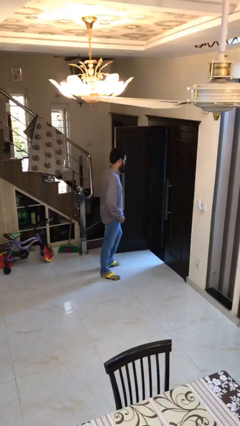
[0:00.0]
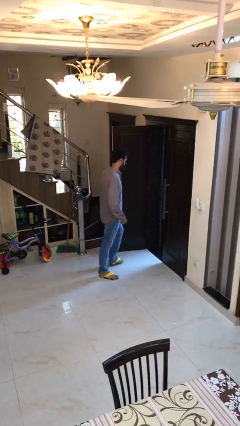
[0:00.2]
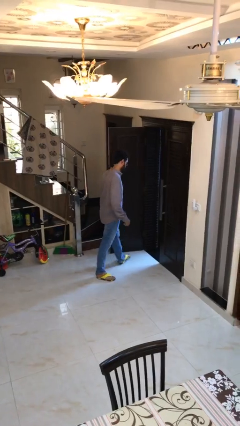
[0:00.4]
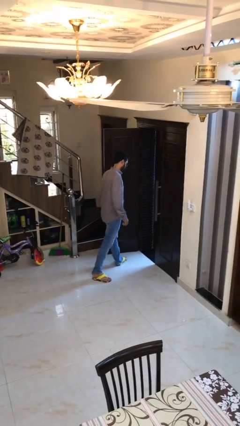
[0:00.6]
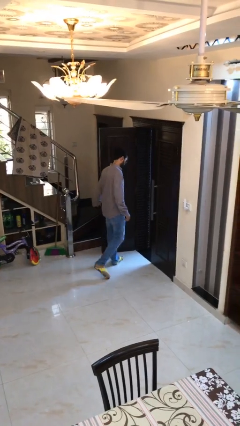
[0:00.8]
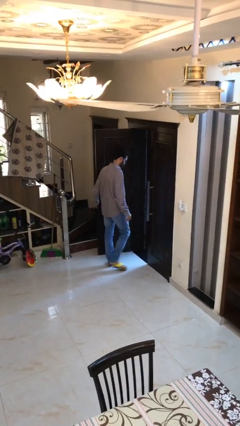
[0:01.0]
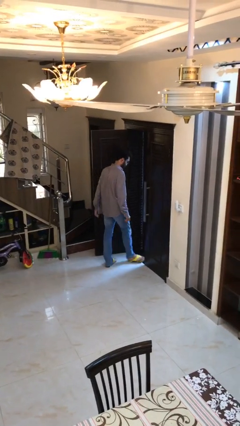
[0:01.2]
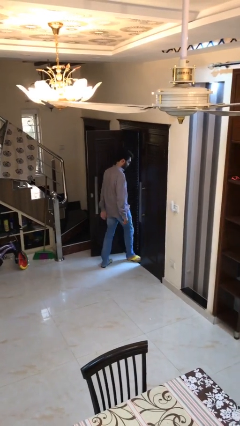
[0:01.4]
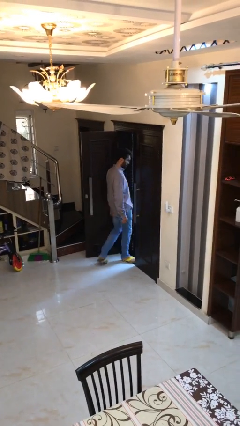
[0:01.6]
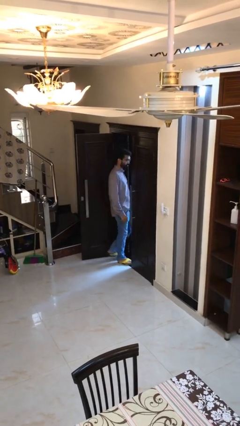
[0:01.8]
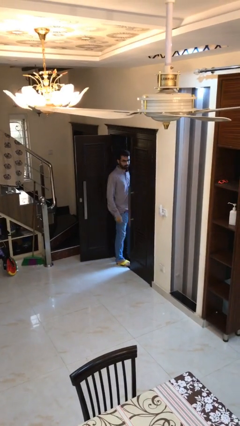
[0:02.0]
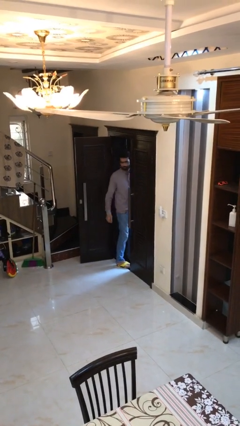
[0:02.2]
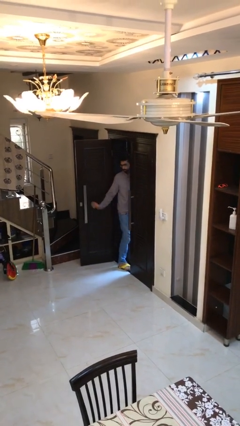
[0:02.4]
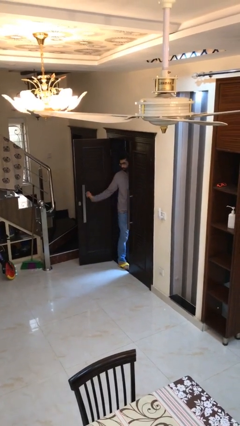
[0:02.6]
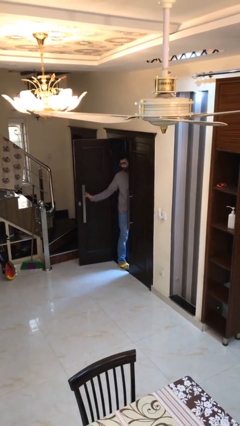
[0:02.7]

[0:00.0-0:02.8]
person exits scene through structure

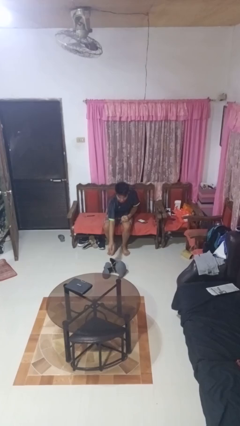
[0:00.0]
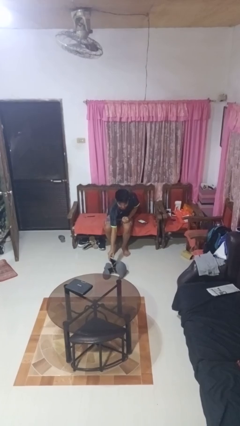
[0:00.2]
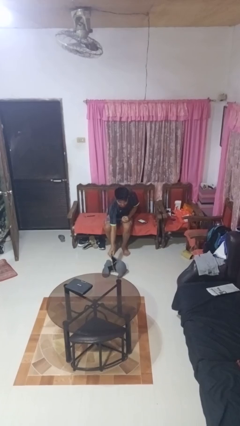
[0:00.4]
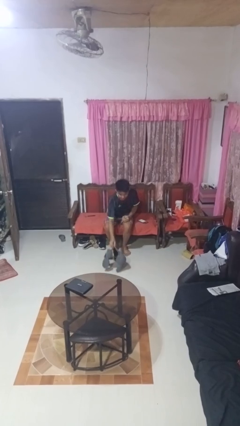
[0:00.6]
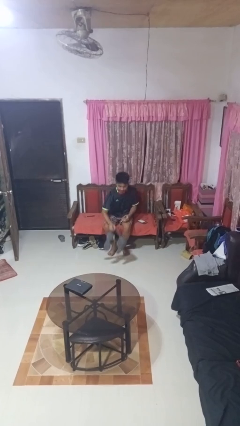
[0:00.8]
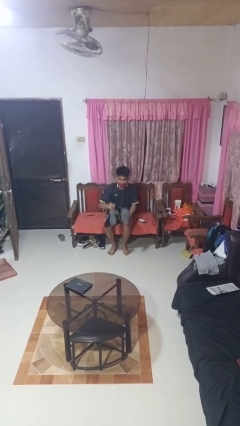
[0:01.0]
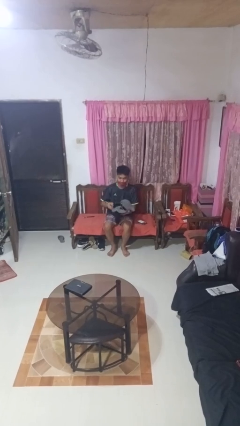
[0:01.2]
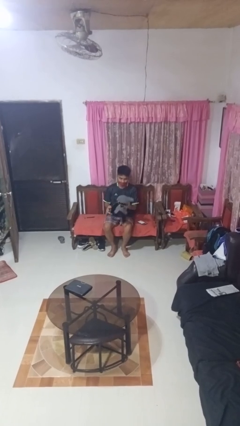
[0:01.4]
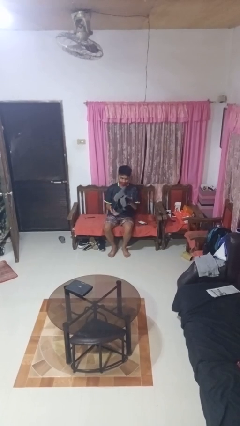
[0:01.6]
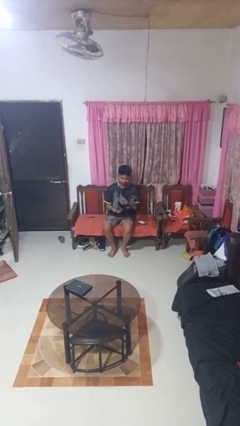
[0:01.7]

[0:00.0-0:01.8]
person picks up object from floor

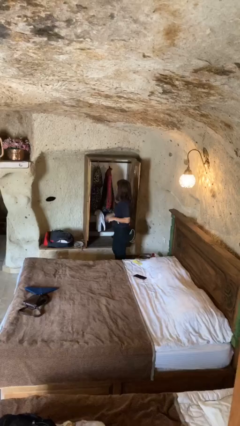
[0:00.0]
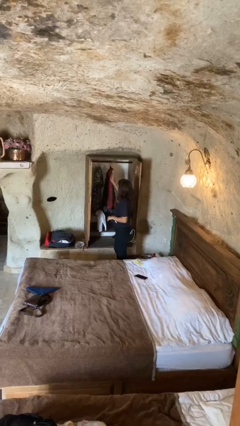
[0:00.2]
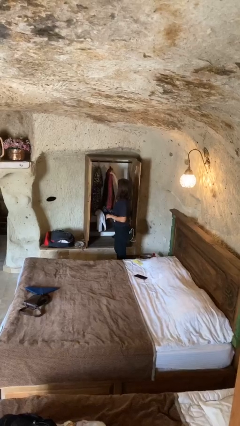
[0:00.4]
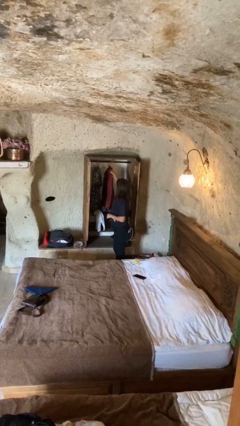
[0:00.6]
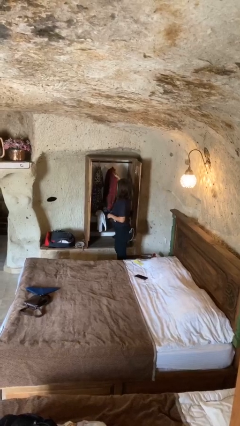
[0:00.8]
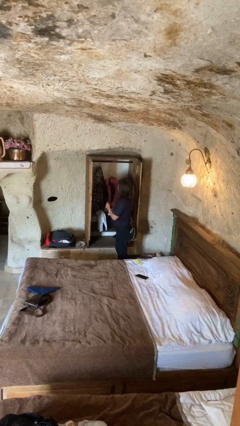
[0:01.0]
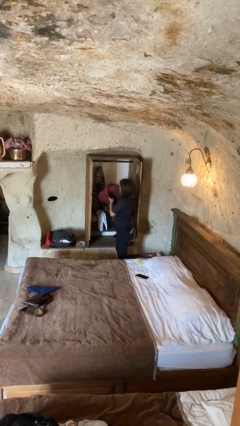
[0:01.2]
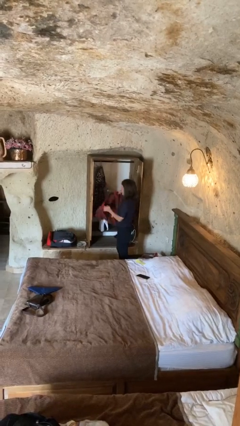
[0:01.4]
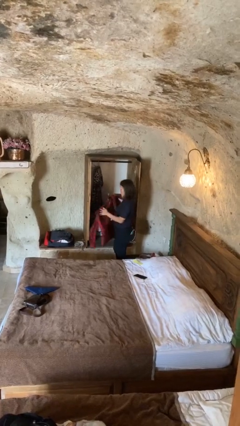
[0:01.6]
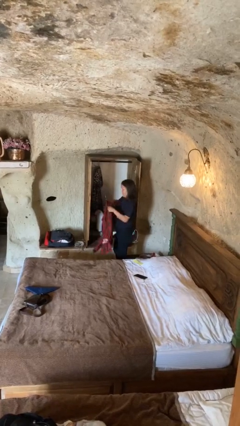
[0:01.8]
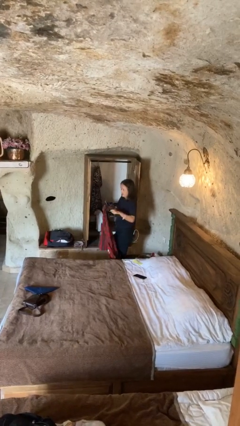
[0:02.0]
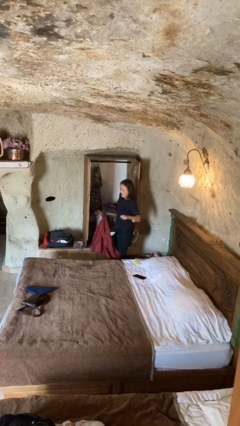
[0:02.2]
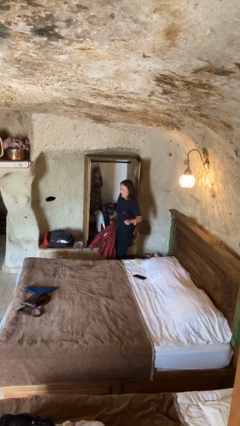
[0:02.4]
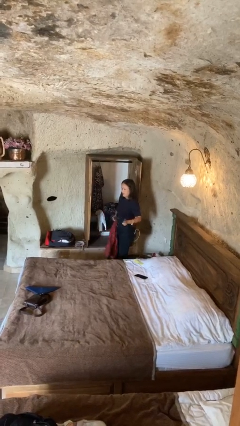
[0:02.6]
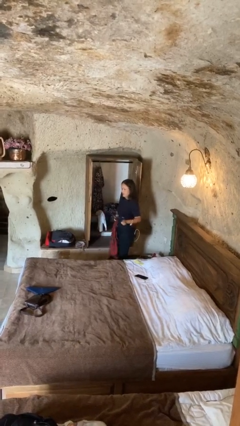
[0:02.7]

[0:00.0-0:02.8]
person takes clothes from closet

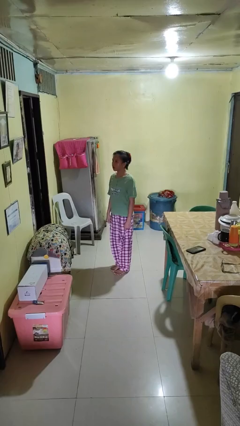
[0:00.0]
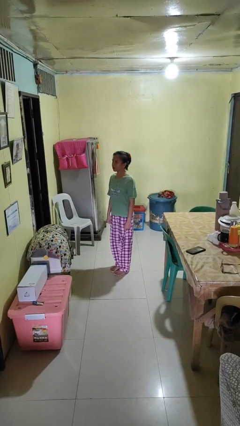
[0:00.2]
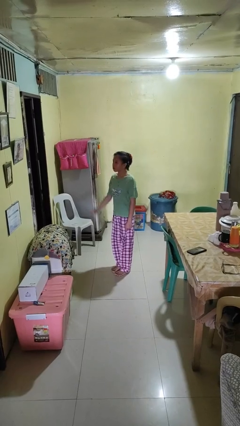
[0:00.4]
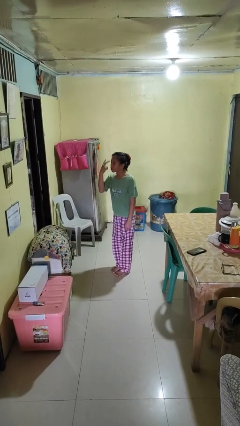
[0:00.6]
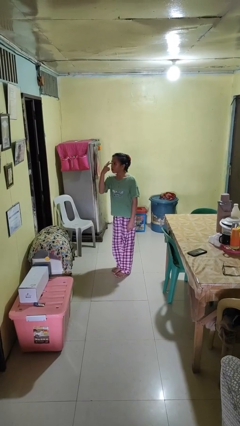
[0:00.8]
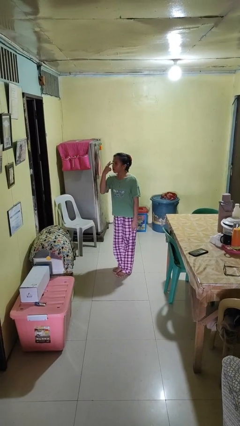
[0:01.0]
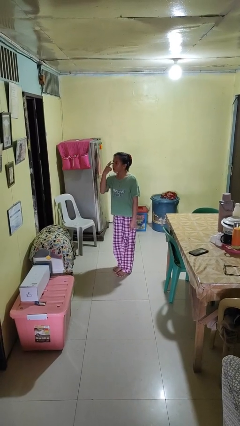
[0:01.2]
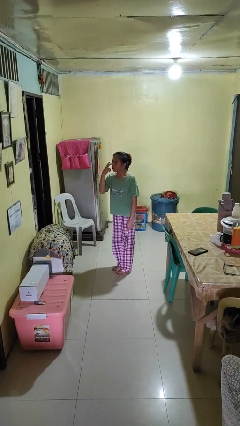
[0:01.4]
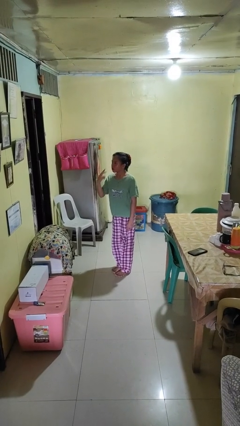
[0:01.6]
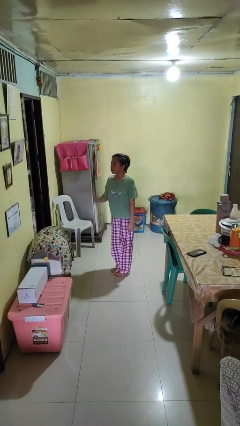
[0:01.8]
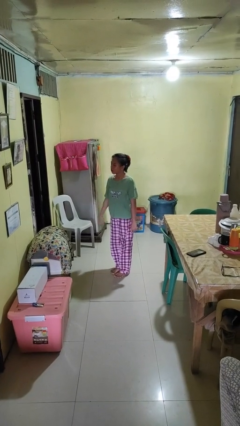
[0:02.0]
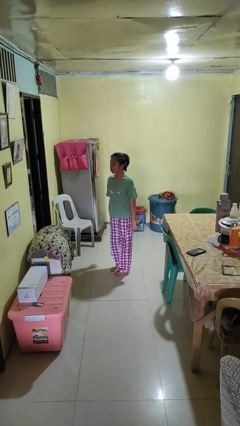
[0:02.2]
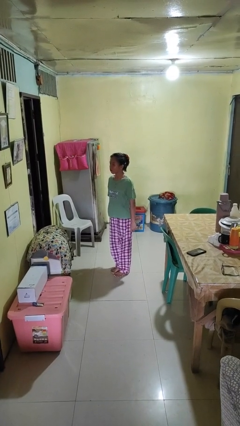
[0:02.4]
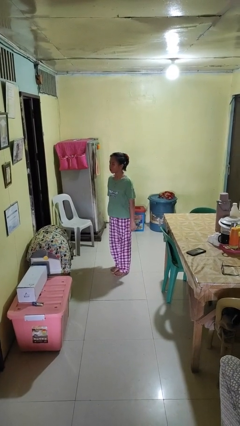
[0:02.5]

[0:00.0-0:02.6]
person gestures watch closely

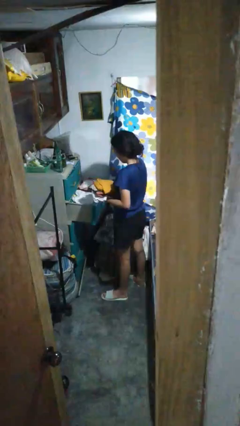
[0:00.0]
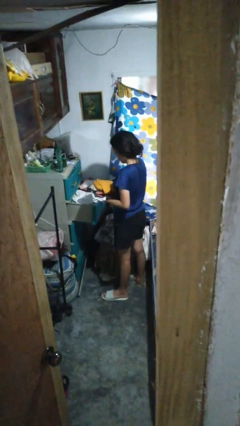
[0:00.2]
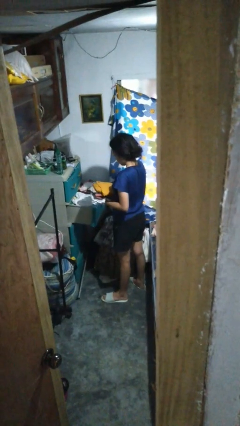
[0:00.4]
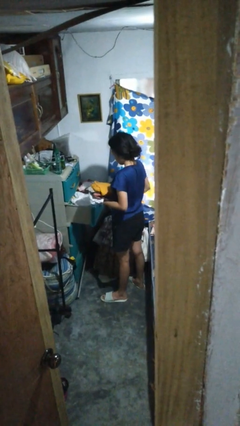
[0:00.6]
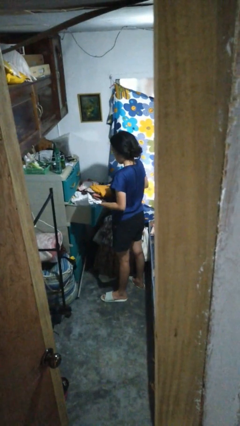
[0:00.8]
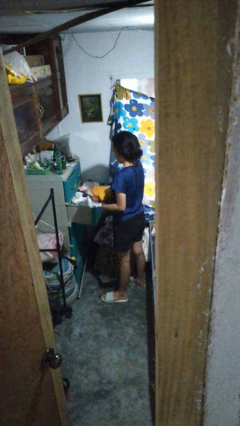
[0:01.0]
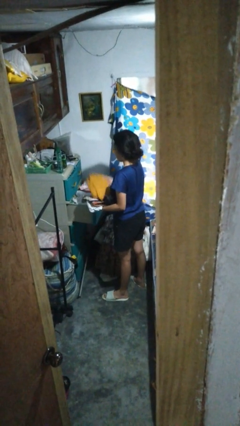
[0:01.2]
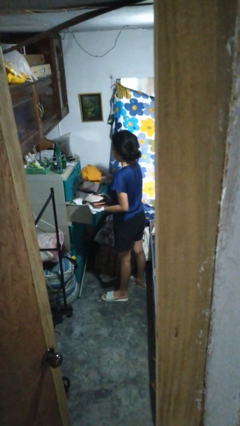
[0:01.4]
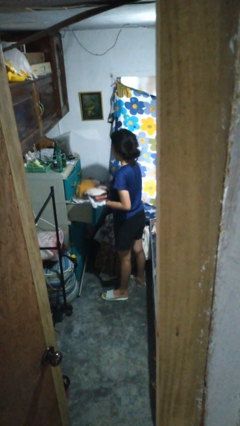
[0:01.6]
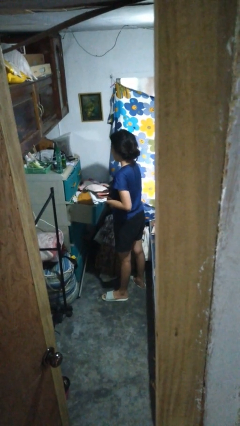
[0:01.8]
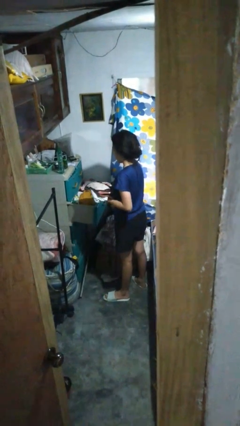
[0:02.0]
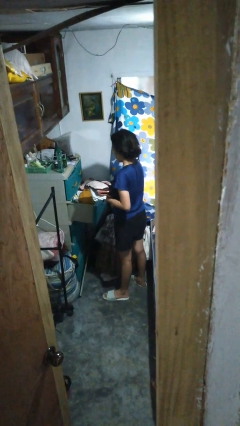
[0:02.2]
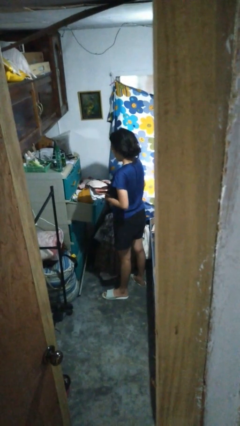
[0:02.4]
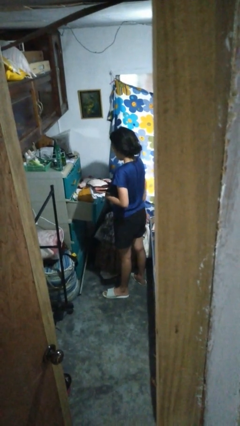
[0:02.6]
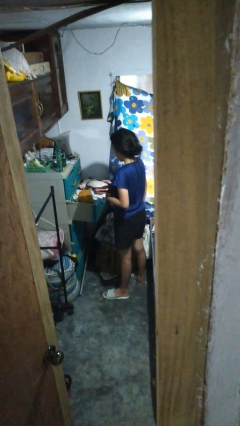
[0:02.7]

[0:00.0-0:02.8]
person puts clothes into dresser

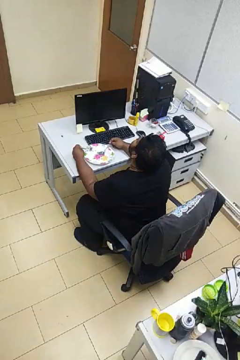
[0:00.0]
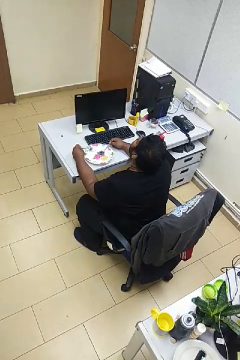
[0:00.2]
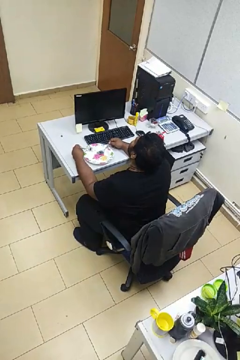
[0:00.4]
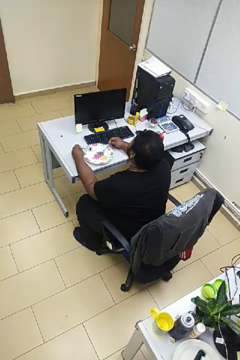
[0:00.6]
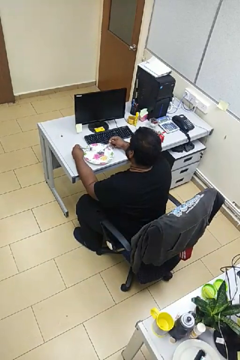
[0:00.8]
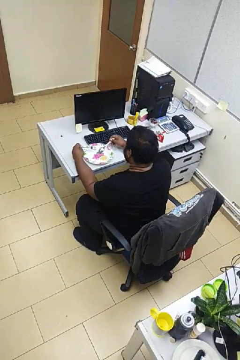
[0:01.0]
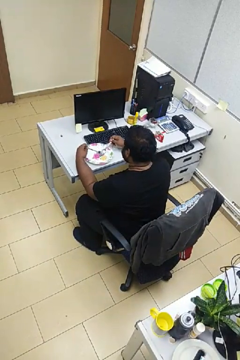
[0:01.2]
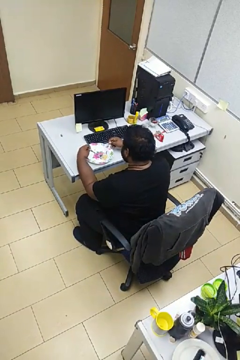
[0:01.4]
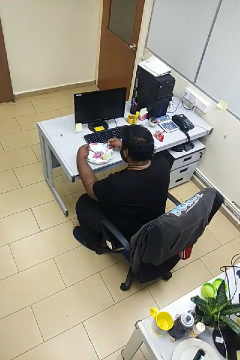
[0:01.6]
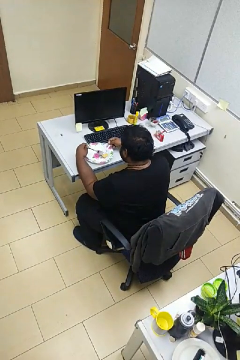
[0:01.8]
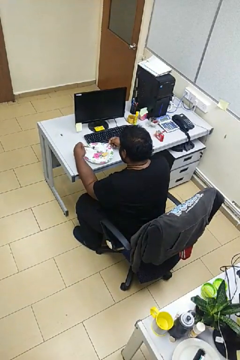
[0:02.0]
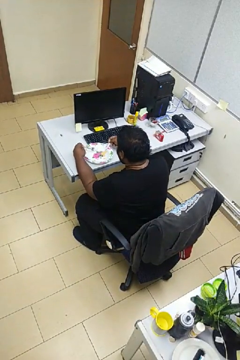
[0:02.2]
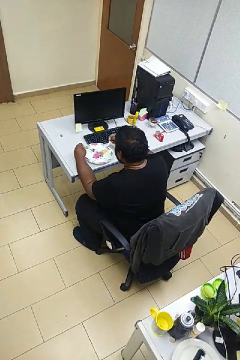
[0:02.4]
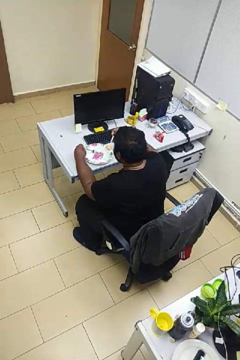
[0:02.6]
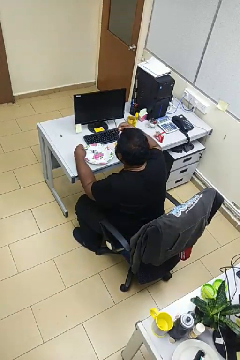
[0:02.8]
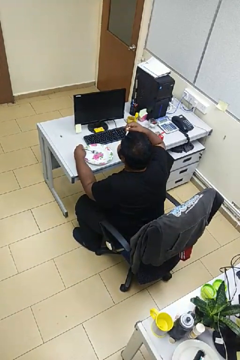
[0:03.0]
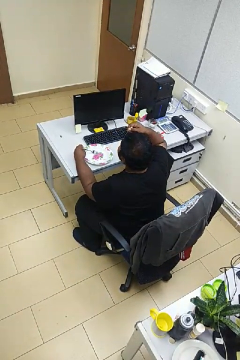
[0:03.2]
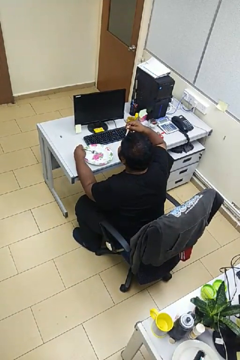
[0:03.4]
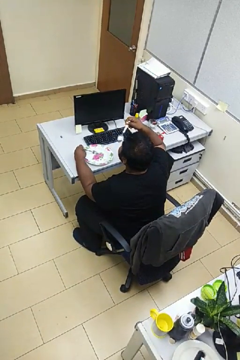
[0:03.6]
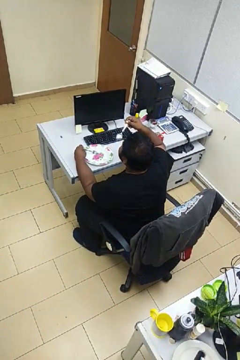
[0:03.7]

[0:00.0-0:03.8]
person eats with utensil

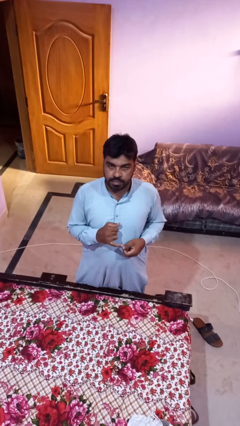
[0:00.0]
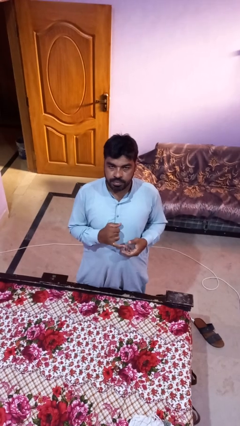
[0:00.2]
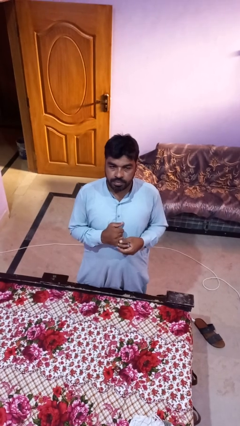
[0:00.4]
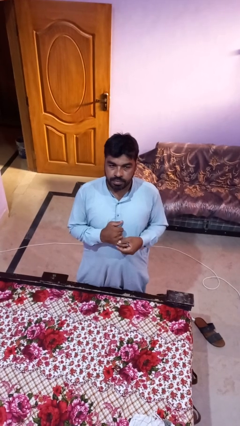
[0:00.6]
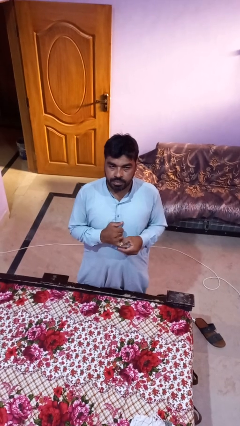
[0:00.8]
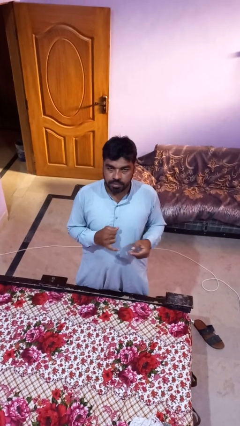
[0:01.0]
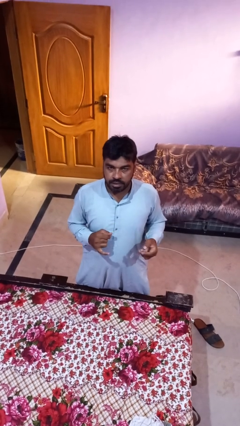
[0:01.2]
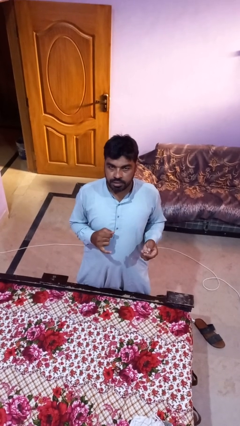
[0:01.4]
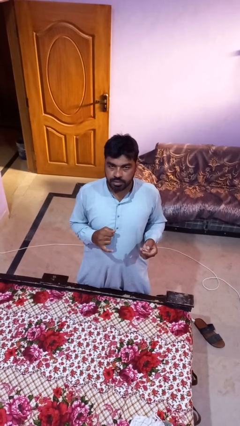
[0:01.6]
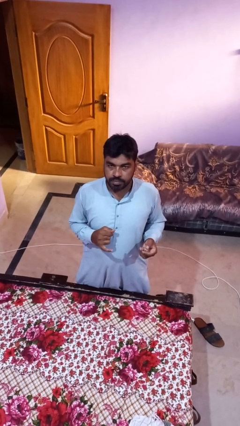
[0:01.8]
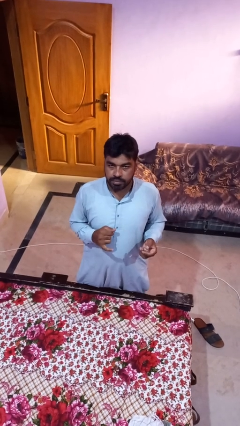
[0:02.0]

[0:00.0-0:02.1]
person takes off ring
